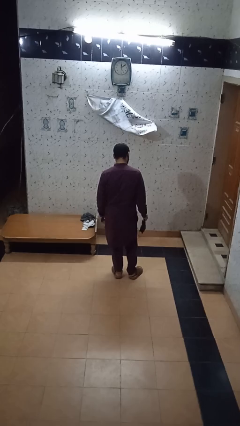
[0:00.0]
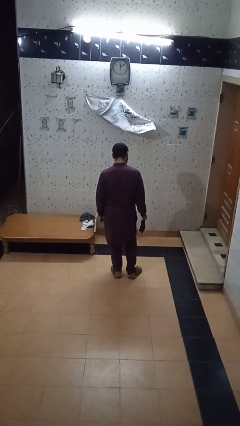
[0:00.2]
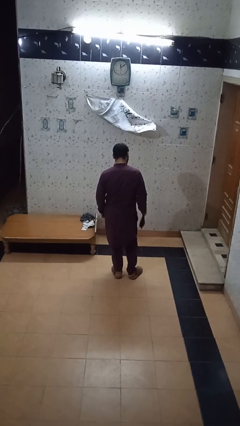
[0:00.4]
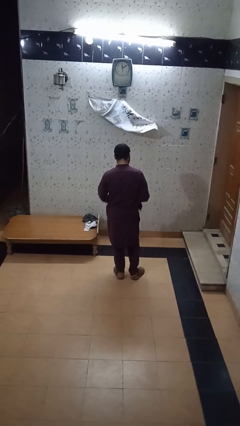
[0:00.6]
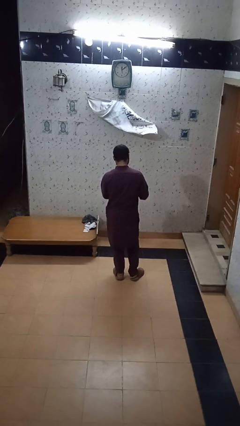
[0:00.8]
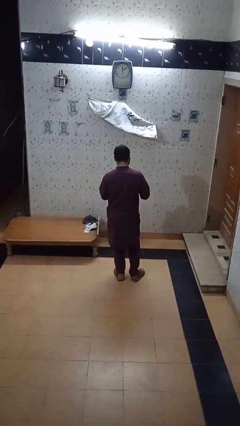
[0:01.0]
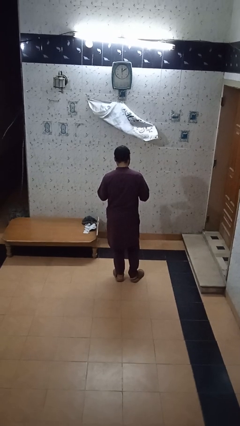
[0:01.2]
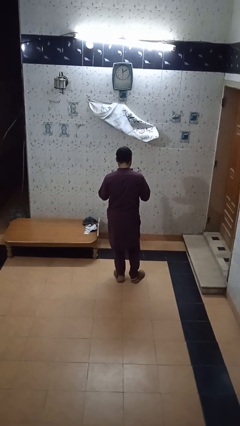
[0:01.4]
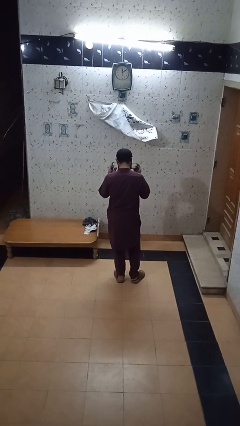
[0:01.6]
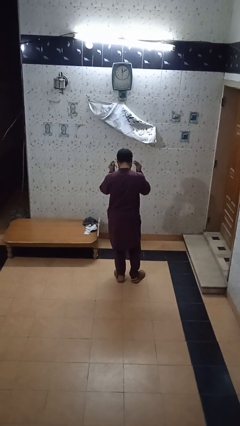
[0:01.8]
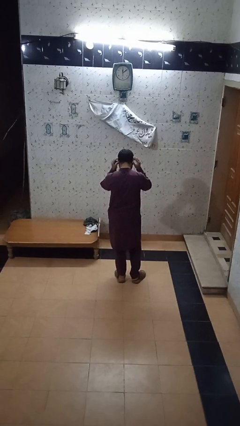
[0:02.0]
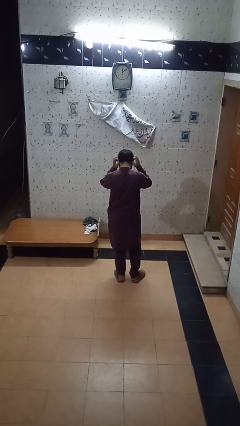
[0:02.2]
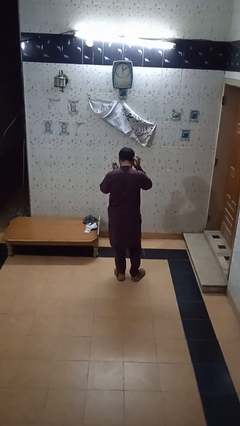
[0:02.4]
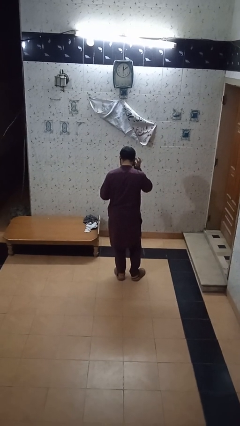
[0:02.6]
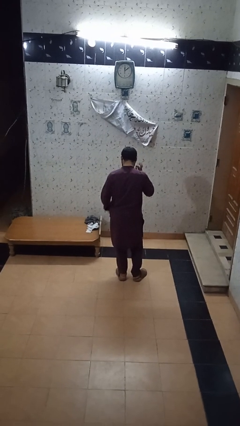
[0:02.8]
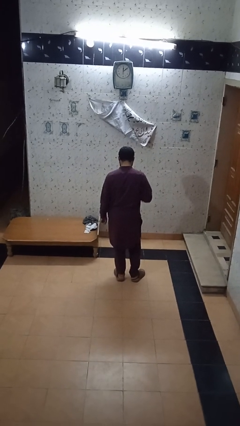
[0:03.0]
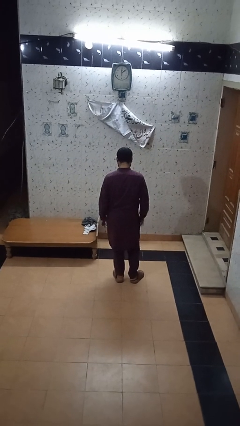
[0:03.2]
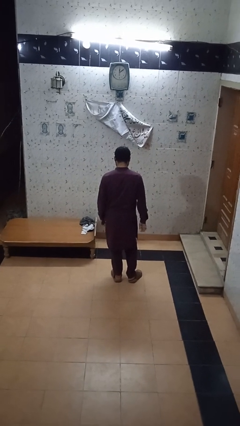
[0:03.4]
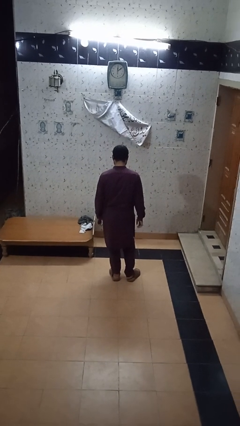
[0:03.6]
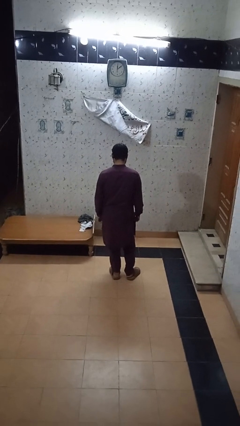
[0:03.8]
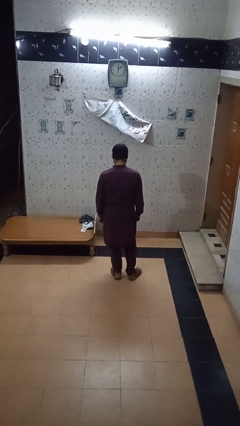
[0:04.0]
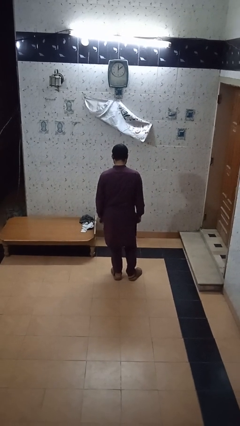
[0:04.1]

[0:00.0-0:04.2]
person puts on facemask

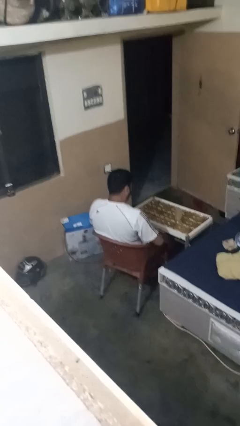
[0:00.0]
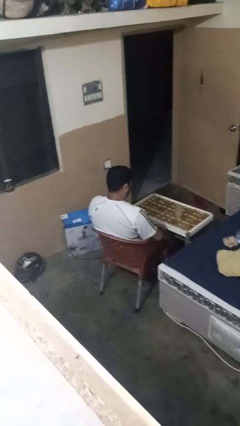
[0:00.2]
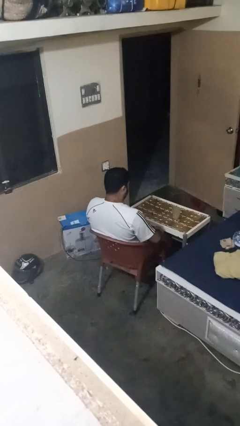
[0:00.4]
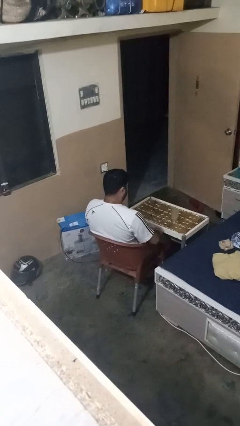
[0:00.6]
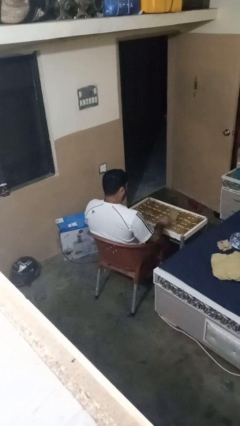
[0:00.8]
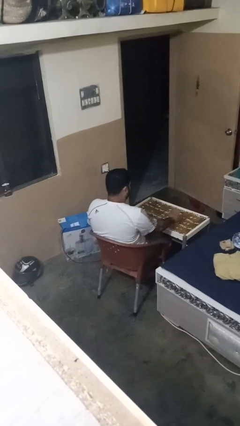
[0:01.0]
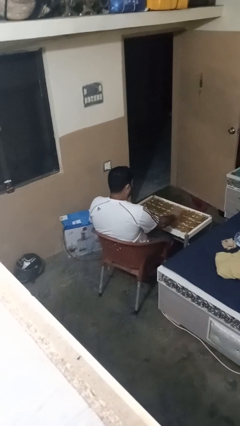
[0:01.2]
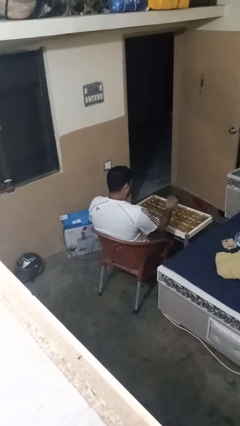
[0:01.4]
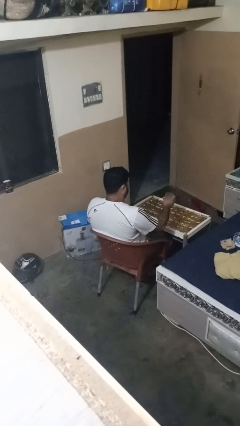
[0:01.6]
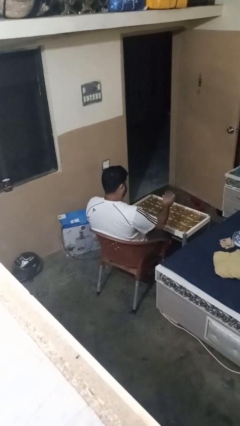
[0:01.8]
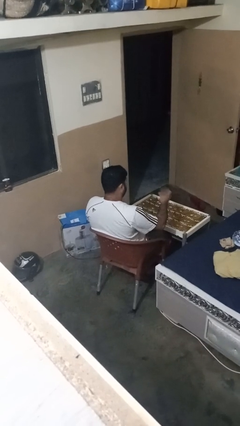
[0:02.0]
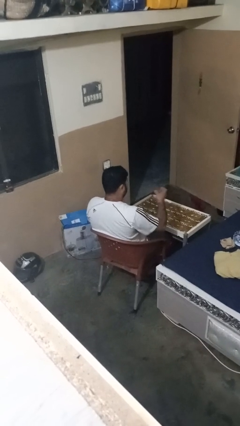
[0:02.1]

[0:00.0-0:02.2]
person picks up object from table

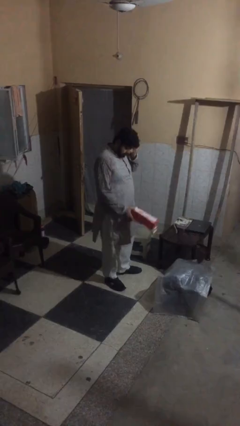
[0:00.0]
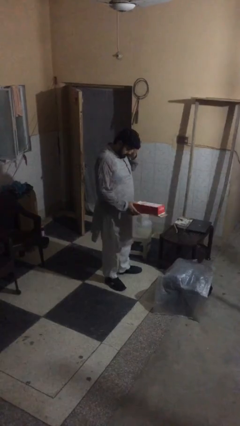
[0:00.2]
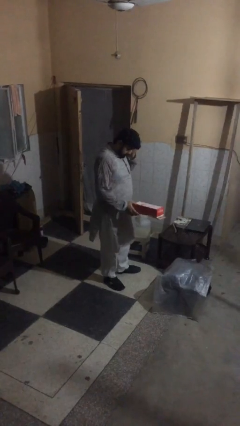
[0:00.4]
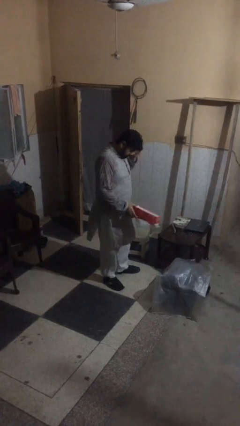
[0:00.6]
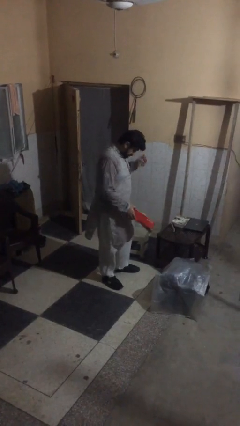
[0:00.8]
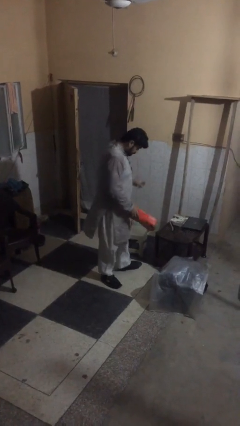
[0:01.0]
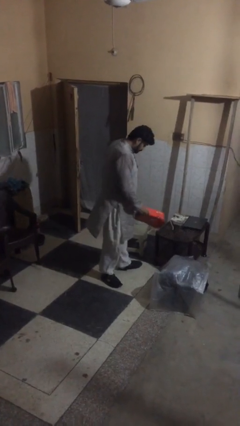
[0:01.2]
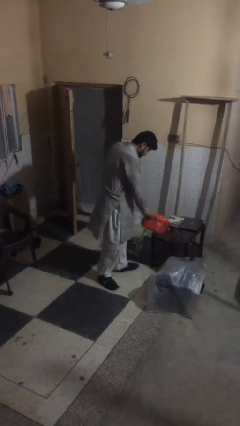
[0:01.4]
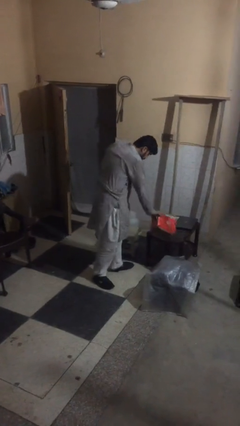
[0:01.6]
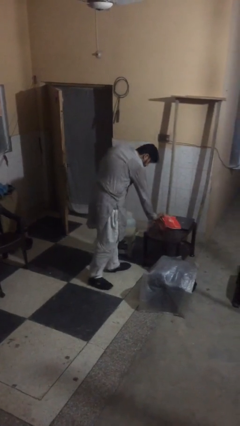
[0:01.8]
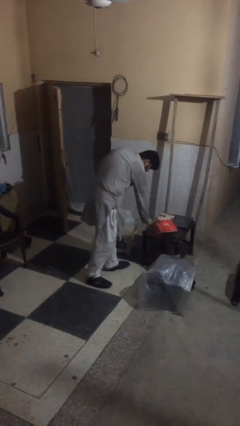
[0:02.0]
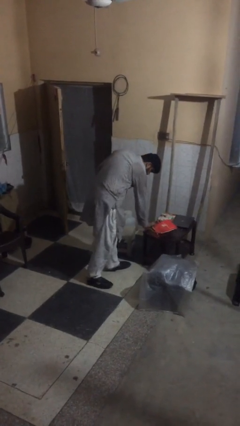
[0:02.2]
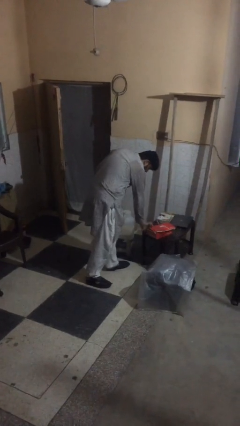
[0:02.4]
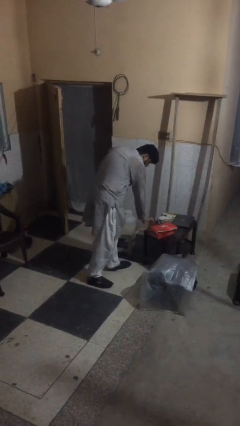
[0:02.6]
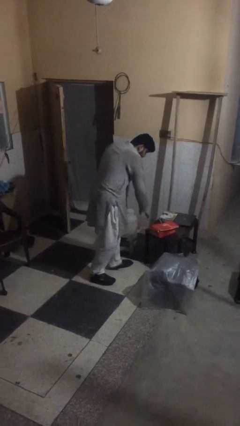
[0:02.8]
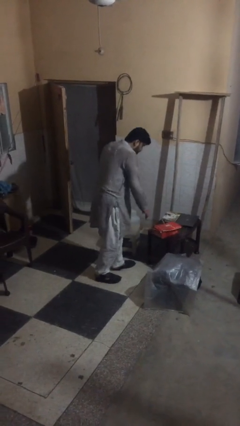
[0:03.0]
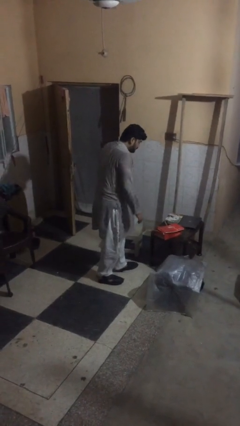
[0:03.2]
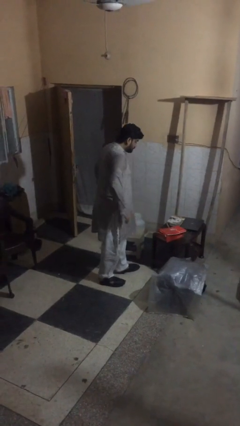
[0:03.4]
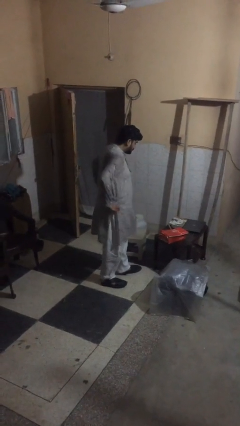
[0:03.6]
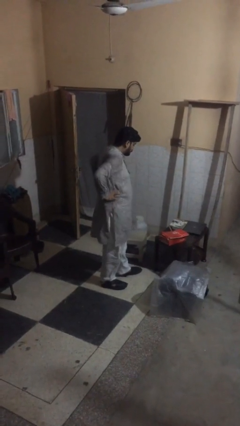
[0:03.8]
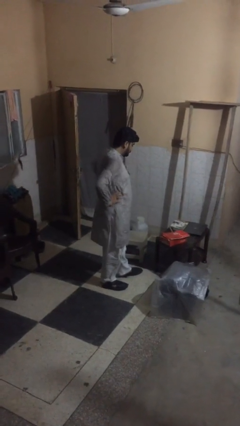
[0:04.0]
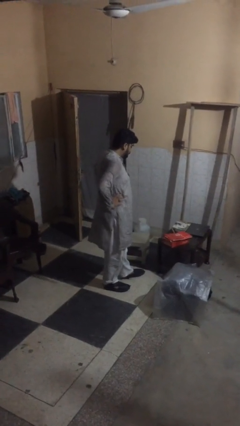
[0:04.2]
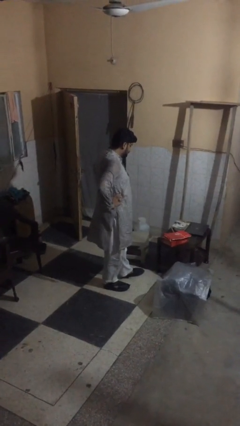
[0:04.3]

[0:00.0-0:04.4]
person puts down object on table

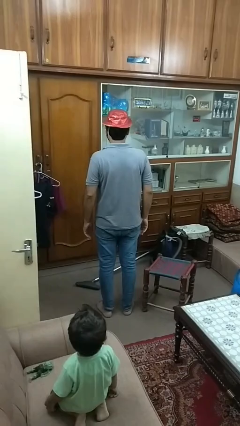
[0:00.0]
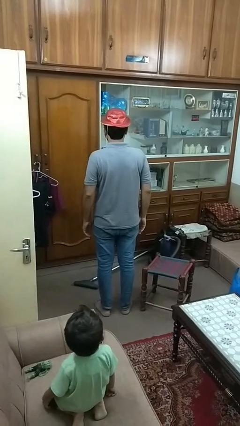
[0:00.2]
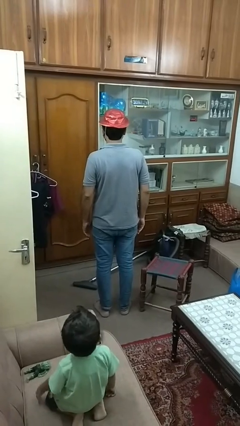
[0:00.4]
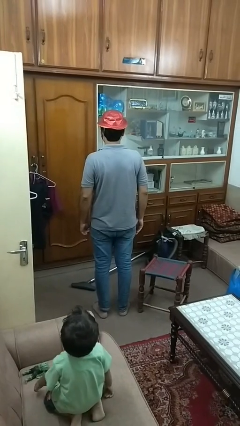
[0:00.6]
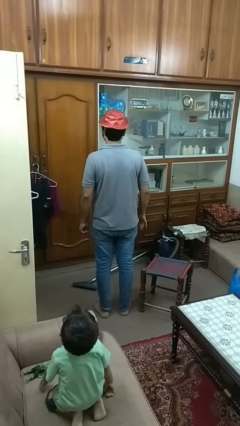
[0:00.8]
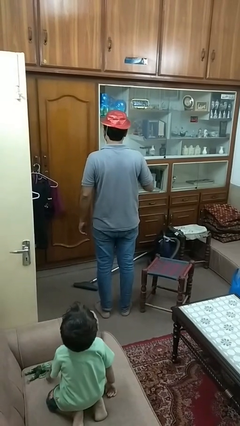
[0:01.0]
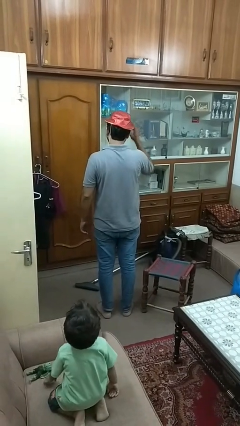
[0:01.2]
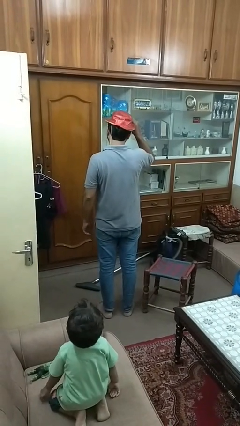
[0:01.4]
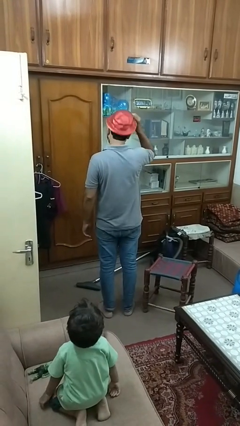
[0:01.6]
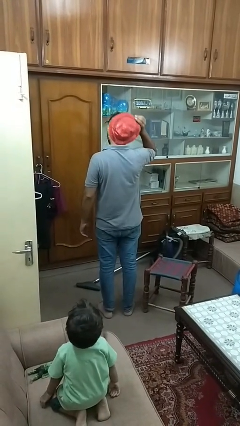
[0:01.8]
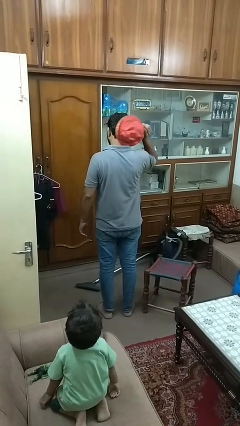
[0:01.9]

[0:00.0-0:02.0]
person takes off hat

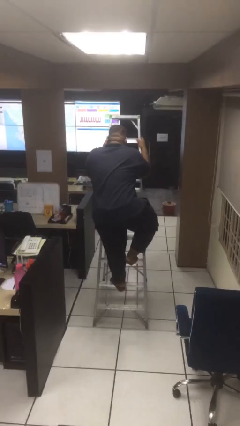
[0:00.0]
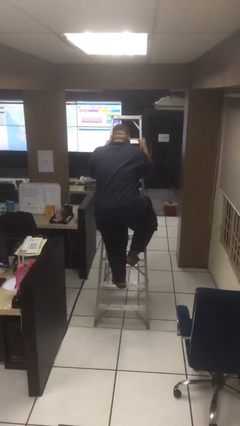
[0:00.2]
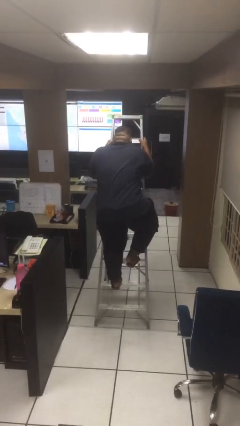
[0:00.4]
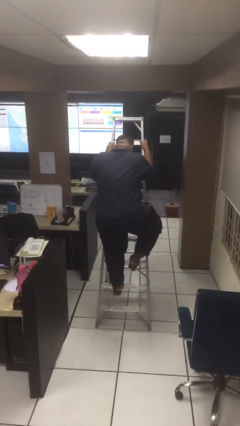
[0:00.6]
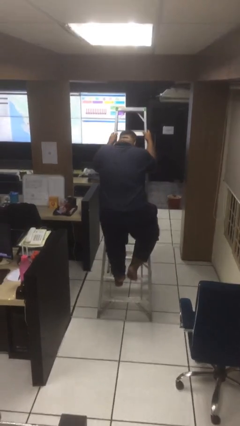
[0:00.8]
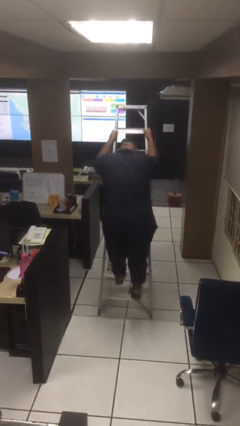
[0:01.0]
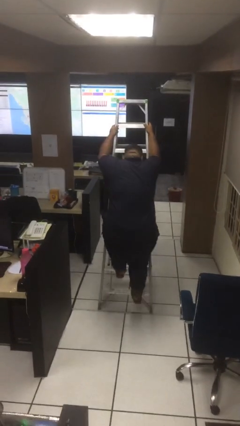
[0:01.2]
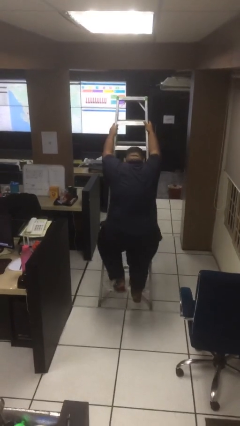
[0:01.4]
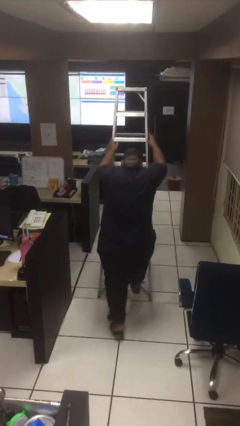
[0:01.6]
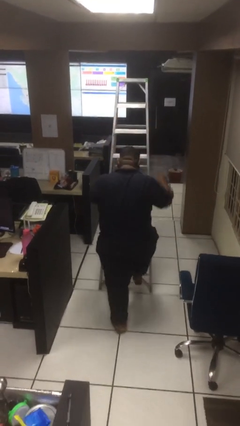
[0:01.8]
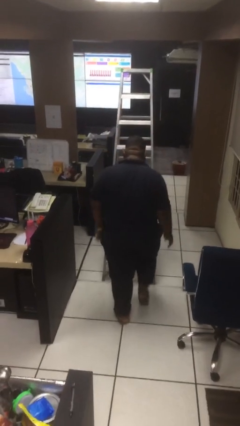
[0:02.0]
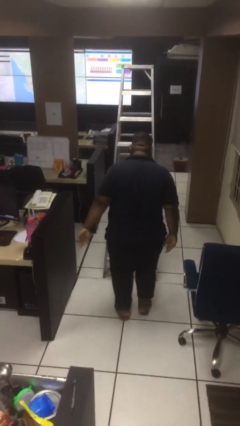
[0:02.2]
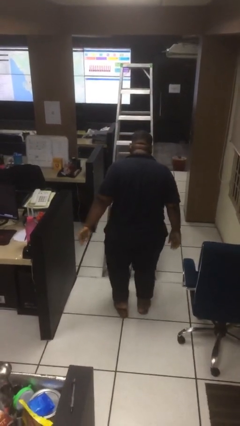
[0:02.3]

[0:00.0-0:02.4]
person climbs down ladder

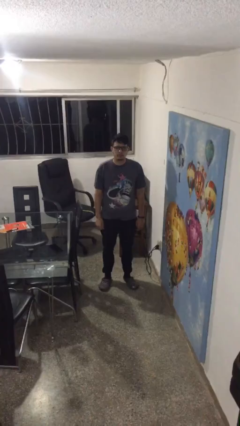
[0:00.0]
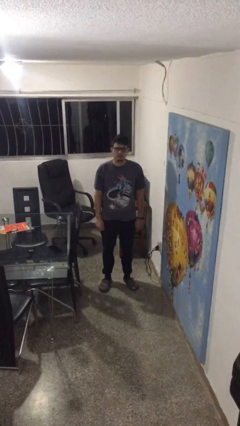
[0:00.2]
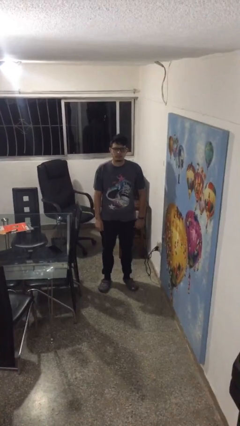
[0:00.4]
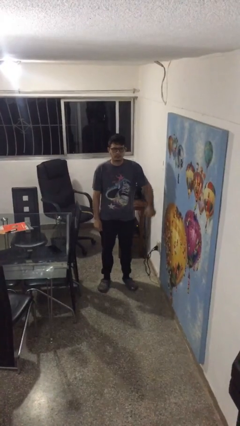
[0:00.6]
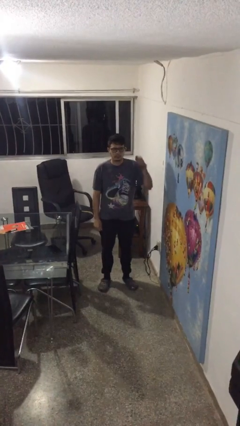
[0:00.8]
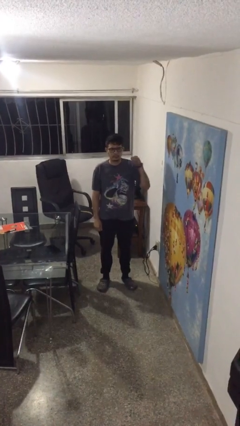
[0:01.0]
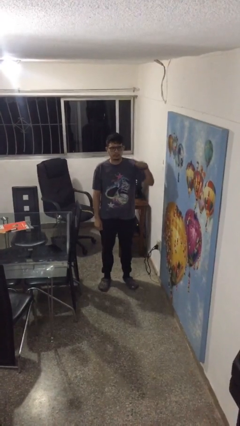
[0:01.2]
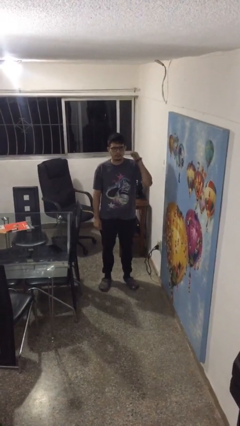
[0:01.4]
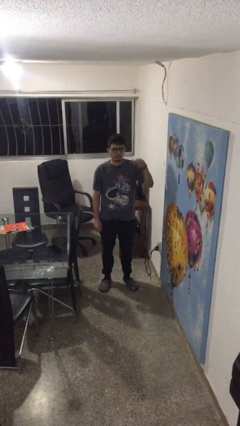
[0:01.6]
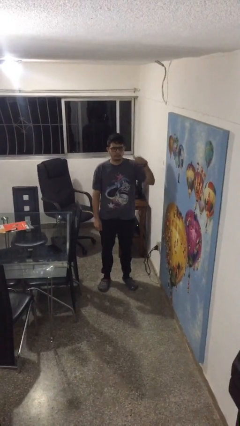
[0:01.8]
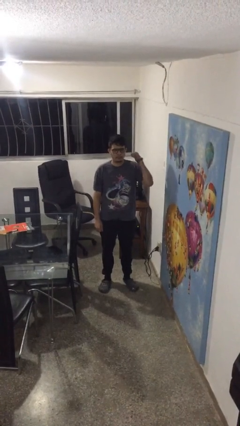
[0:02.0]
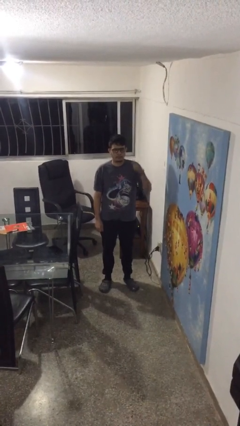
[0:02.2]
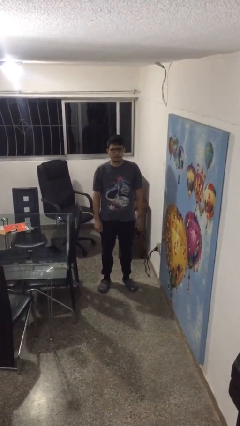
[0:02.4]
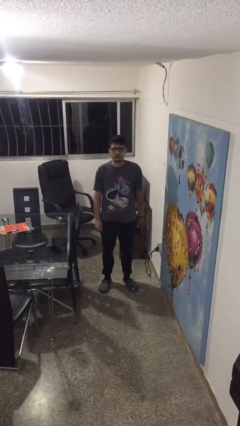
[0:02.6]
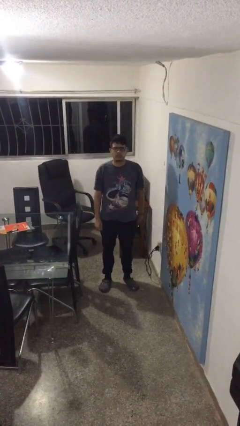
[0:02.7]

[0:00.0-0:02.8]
person gestures behind me
